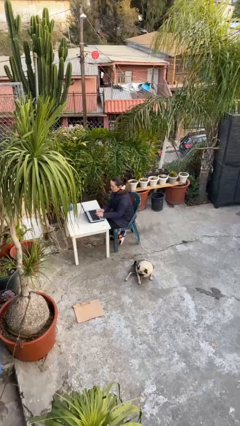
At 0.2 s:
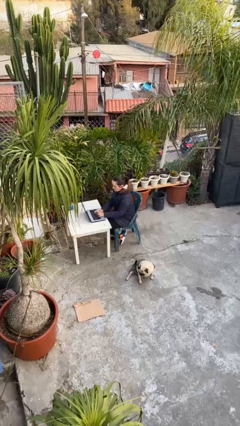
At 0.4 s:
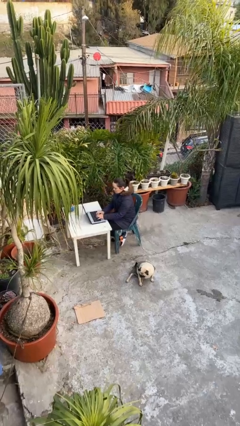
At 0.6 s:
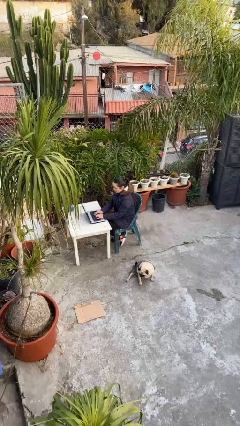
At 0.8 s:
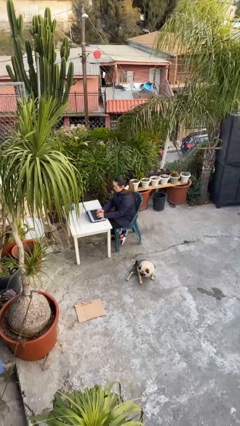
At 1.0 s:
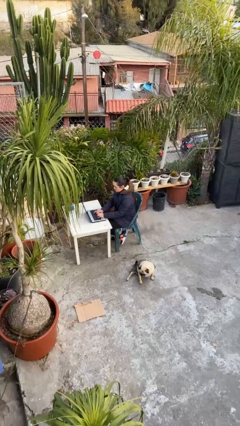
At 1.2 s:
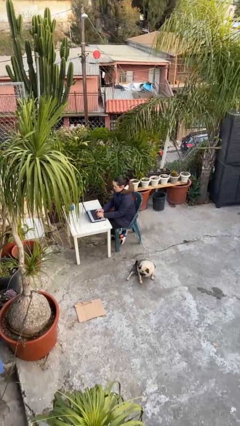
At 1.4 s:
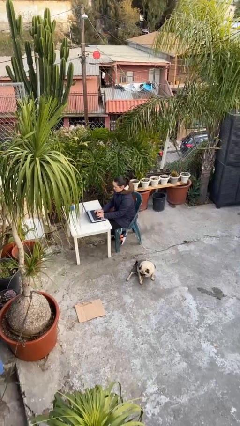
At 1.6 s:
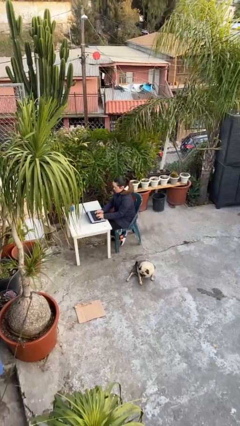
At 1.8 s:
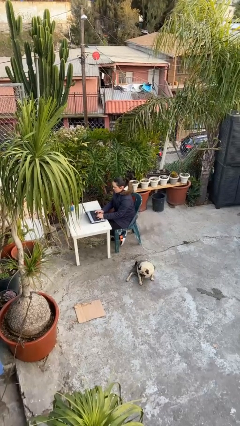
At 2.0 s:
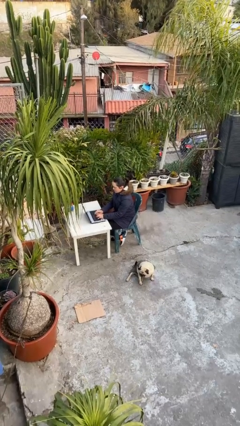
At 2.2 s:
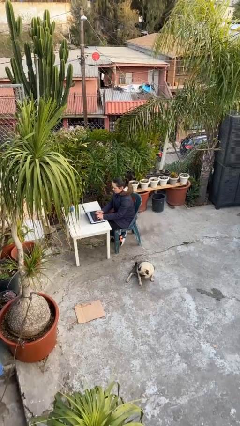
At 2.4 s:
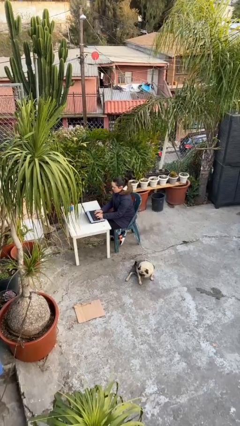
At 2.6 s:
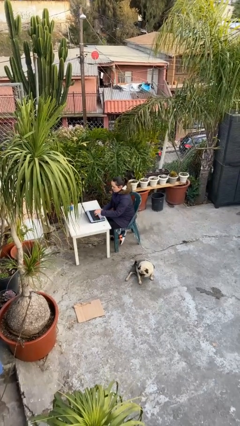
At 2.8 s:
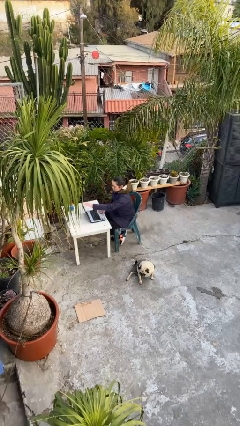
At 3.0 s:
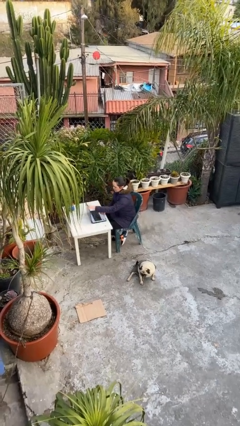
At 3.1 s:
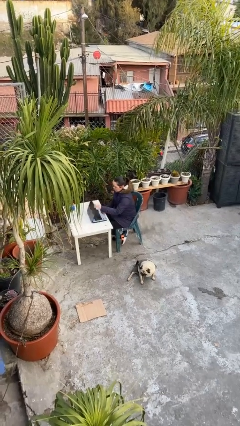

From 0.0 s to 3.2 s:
person interacts with laptop

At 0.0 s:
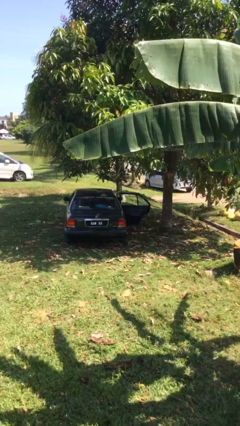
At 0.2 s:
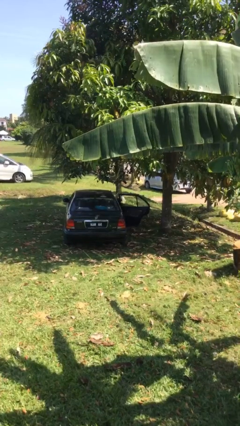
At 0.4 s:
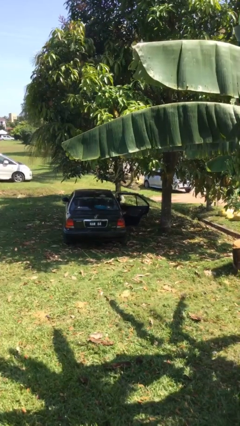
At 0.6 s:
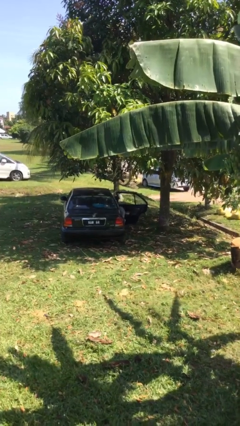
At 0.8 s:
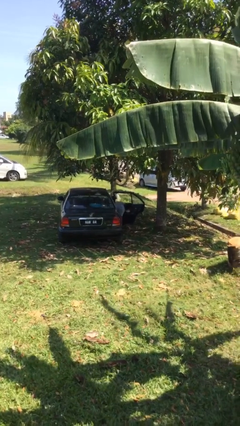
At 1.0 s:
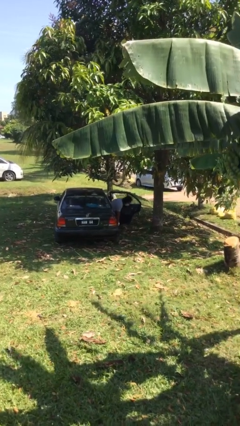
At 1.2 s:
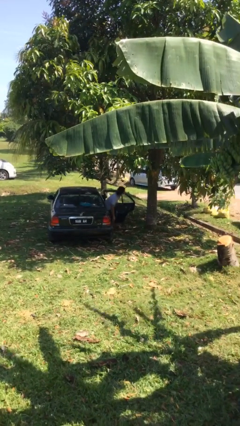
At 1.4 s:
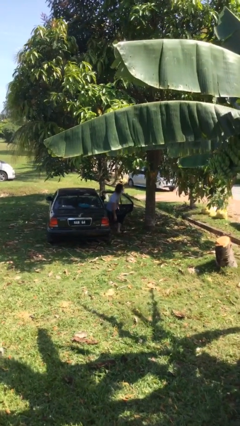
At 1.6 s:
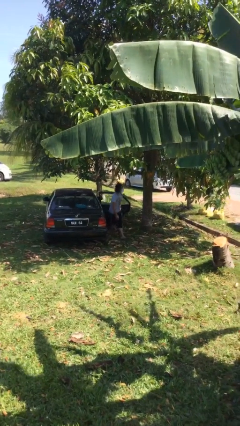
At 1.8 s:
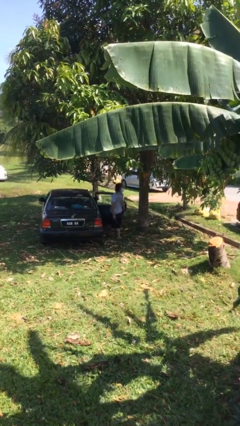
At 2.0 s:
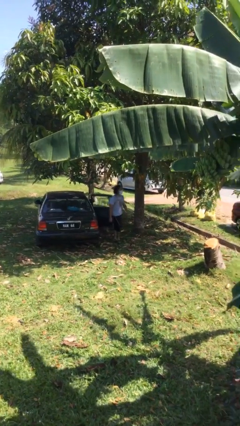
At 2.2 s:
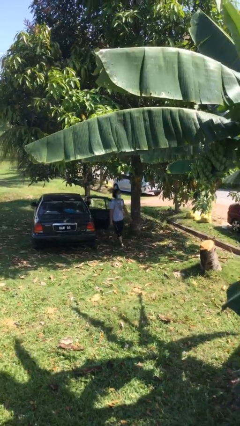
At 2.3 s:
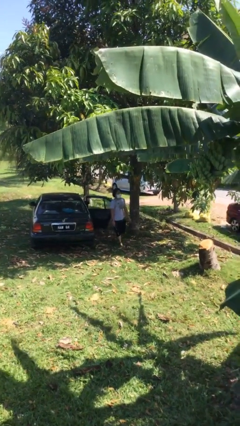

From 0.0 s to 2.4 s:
person exits car

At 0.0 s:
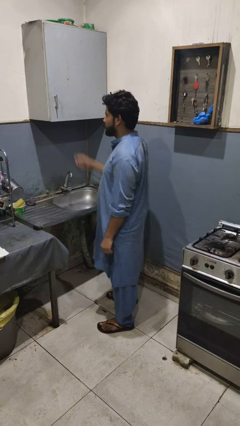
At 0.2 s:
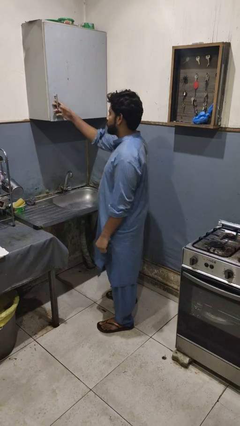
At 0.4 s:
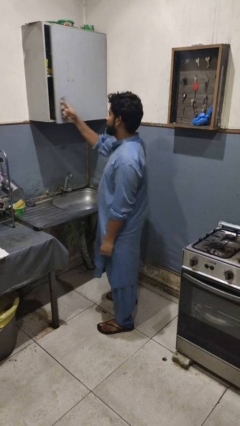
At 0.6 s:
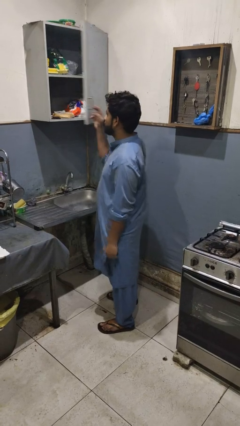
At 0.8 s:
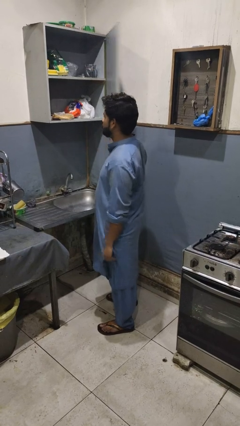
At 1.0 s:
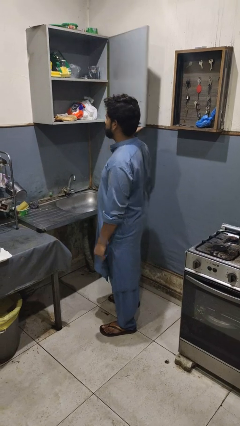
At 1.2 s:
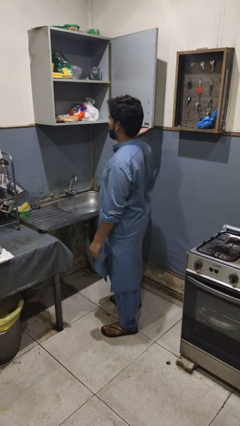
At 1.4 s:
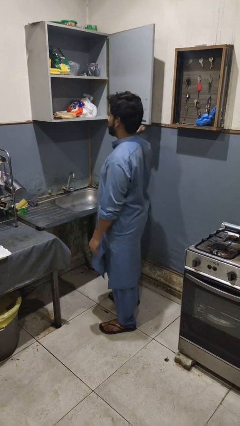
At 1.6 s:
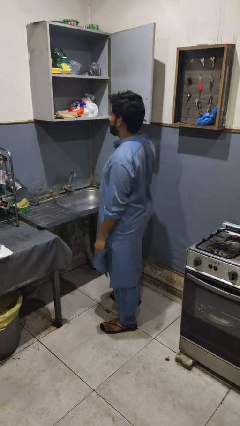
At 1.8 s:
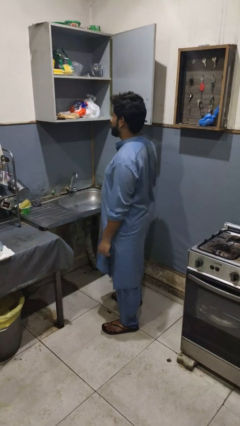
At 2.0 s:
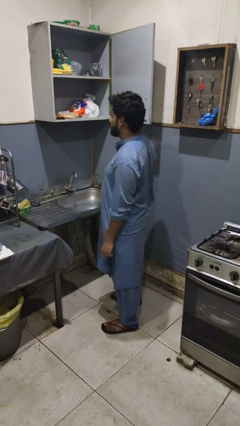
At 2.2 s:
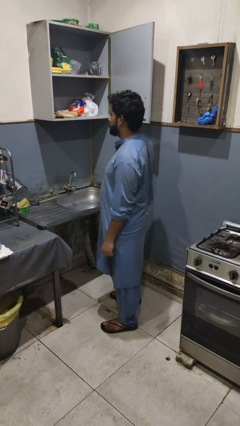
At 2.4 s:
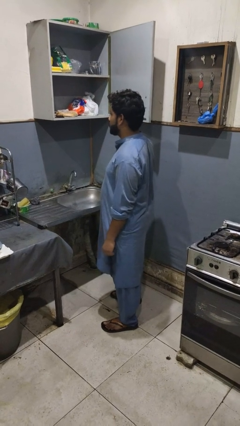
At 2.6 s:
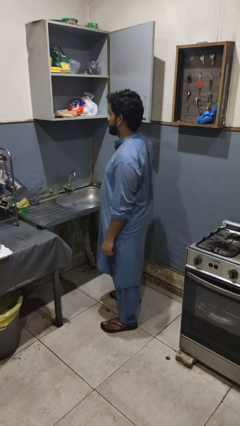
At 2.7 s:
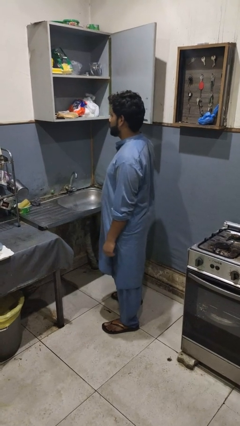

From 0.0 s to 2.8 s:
person opens cabinet

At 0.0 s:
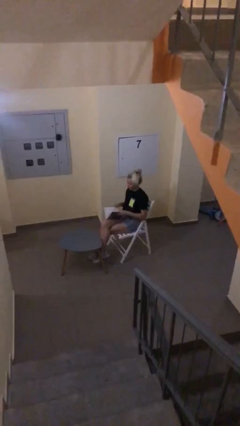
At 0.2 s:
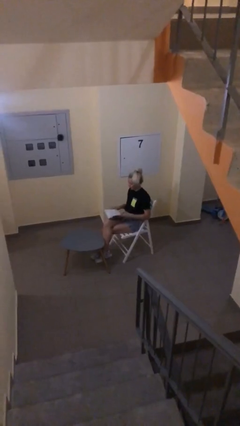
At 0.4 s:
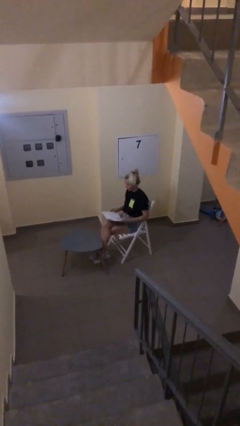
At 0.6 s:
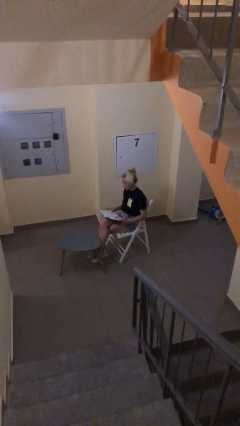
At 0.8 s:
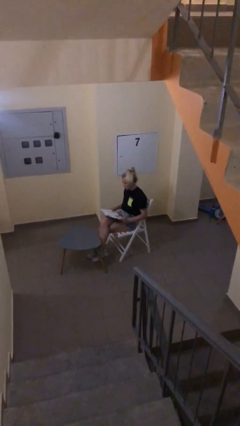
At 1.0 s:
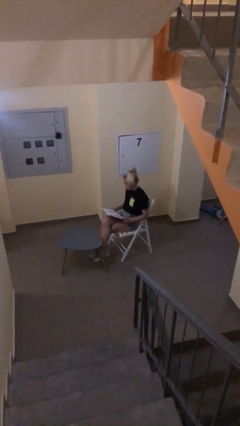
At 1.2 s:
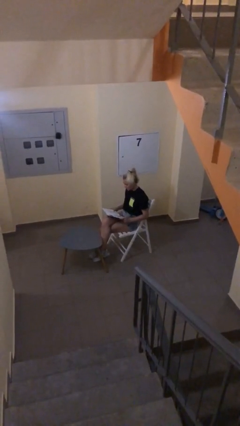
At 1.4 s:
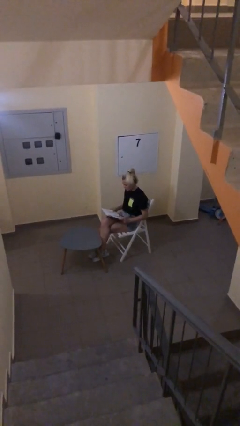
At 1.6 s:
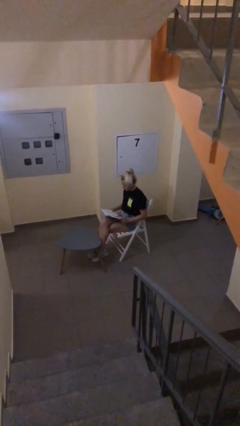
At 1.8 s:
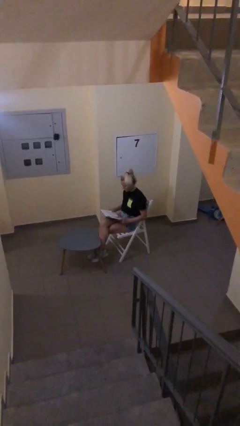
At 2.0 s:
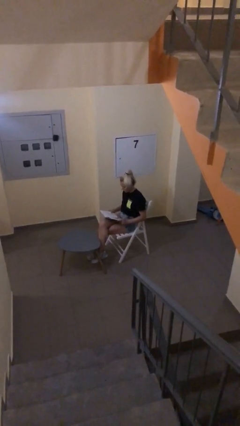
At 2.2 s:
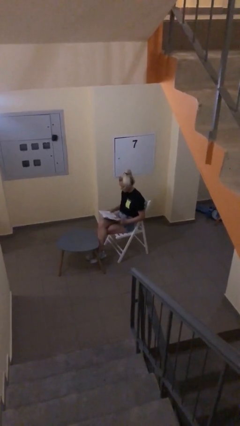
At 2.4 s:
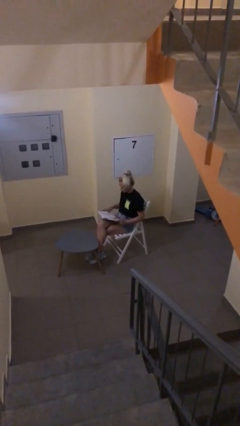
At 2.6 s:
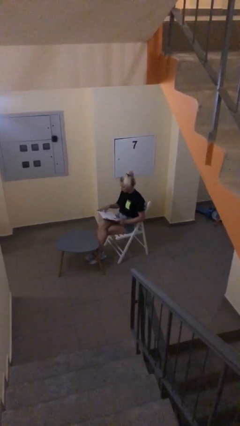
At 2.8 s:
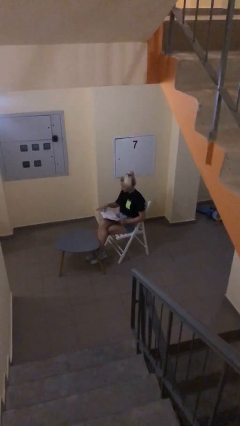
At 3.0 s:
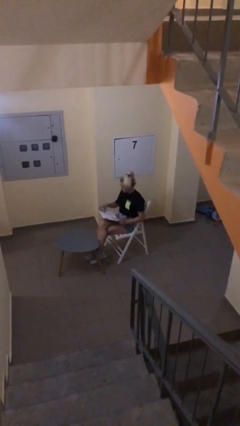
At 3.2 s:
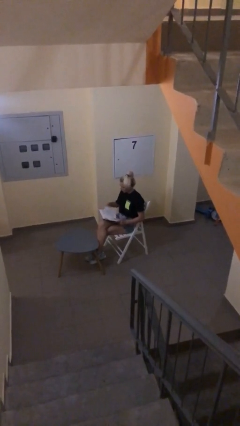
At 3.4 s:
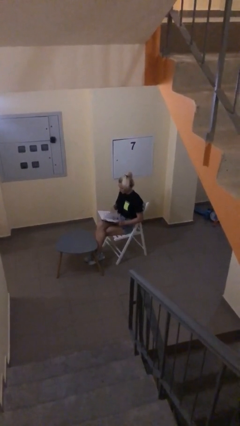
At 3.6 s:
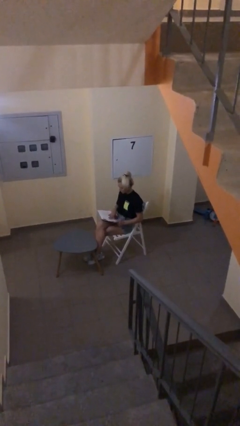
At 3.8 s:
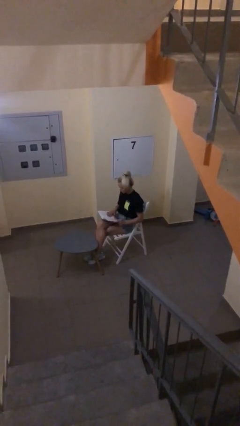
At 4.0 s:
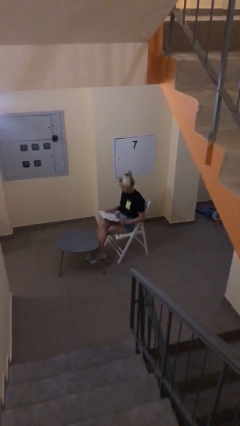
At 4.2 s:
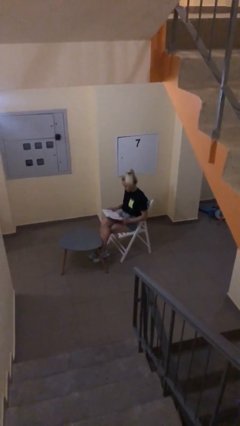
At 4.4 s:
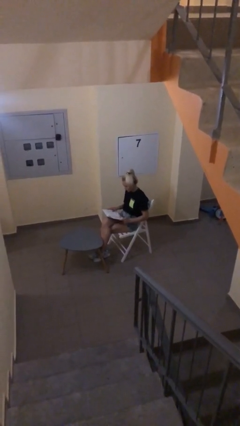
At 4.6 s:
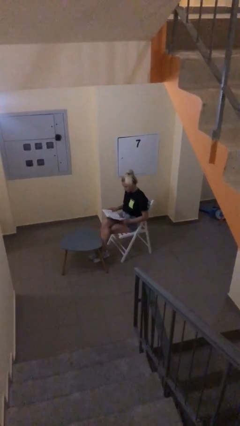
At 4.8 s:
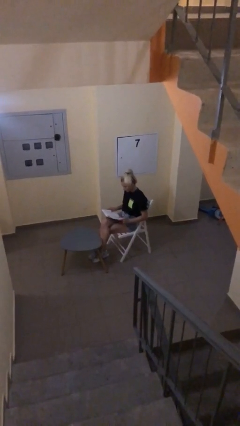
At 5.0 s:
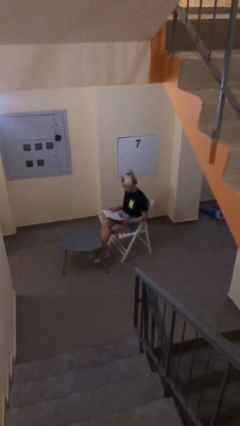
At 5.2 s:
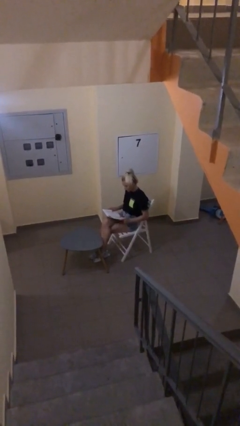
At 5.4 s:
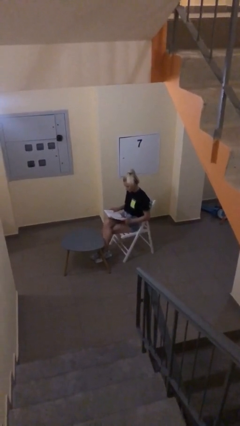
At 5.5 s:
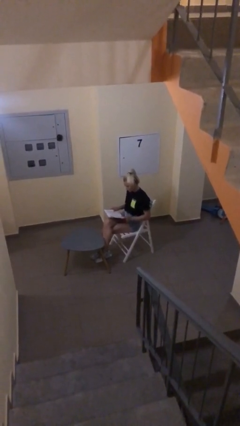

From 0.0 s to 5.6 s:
person reads document

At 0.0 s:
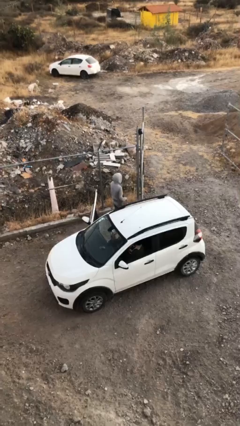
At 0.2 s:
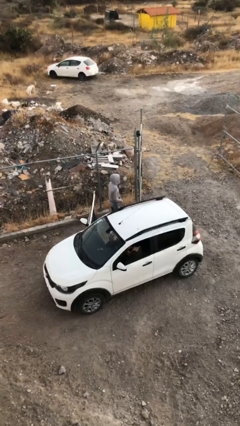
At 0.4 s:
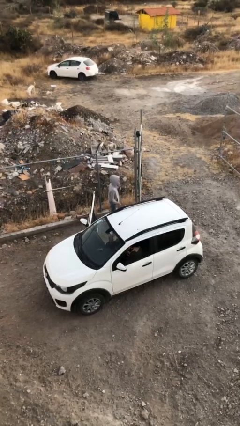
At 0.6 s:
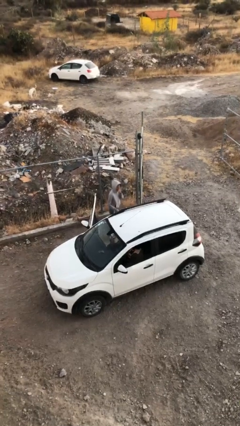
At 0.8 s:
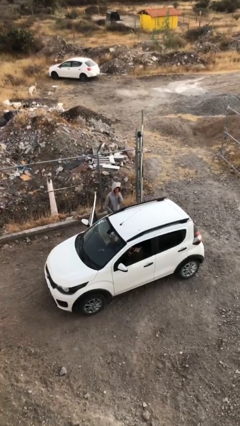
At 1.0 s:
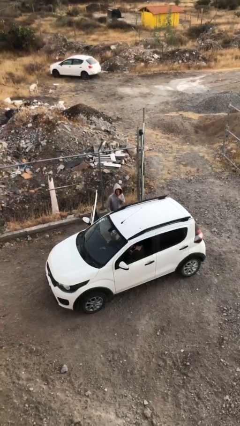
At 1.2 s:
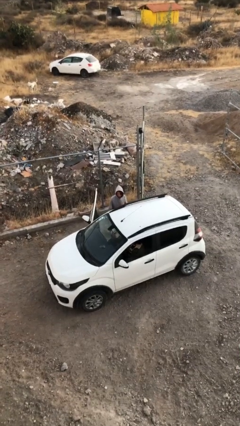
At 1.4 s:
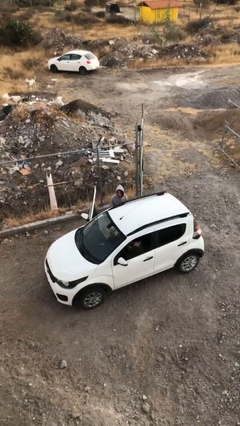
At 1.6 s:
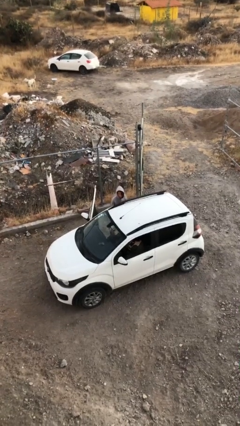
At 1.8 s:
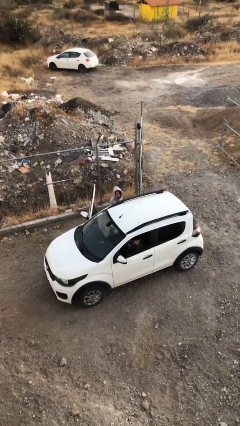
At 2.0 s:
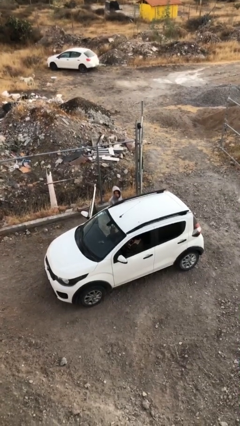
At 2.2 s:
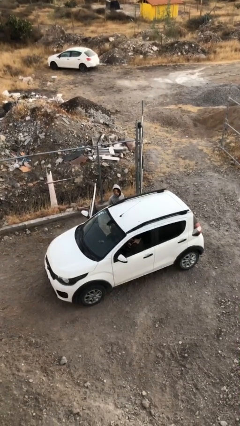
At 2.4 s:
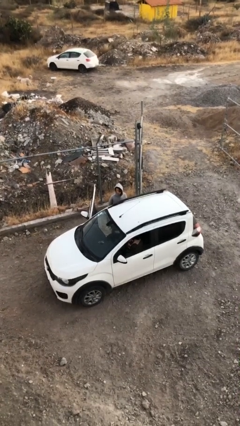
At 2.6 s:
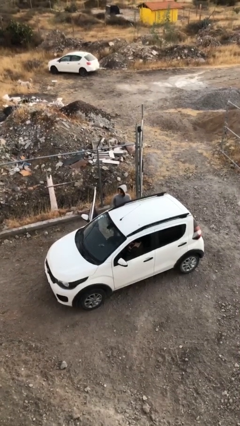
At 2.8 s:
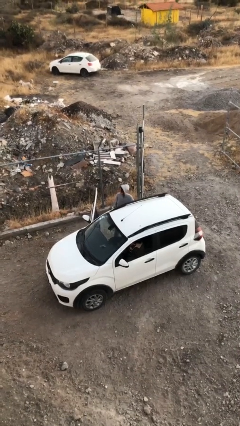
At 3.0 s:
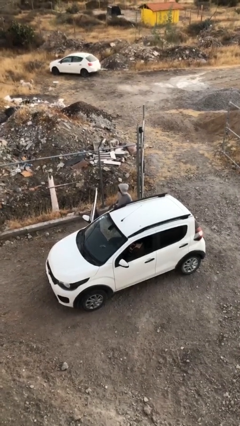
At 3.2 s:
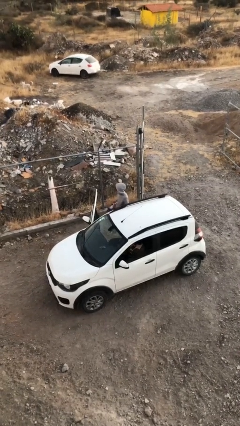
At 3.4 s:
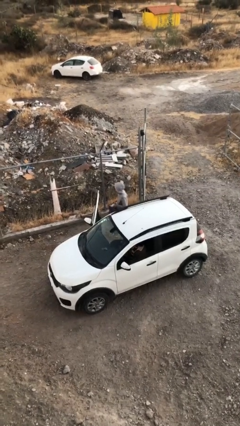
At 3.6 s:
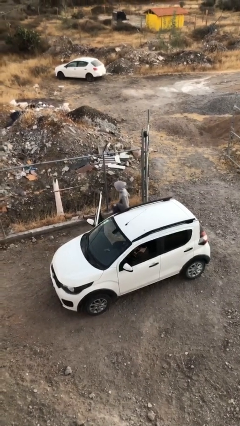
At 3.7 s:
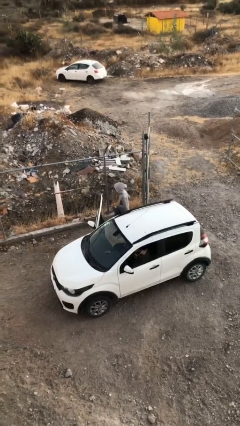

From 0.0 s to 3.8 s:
person unloads car
